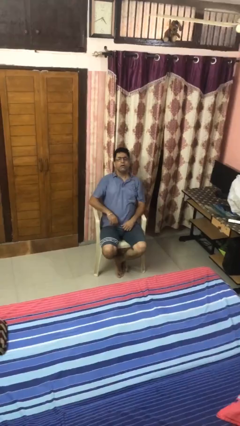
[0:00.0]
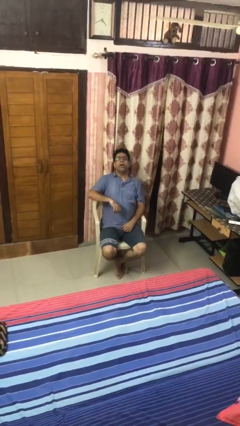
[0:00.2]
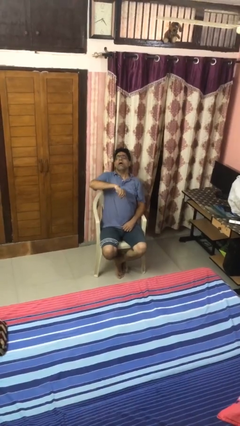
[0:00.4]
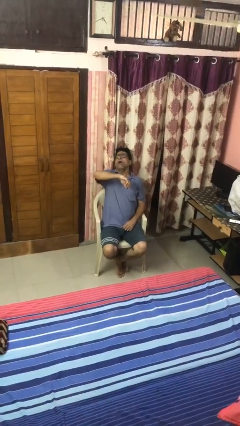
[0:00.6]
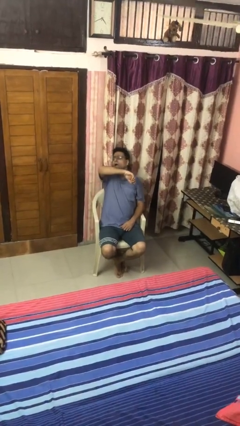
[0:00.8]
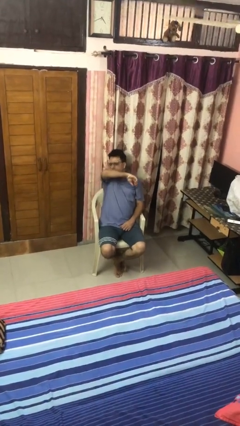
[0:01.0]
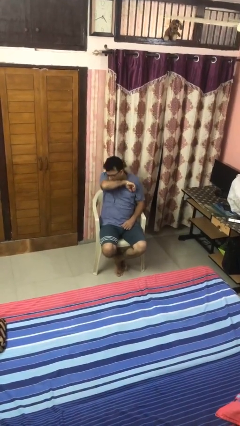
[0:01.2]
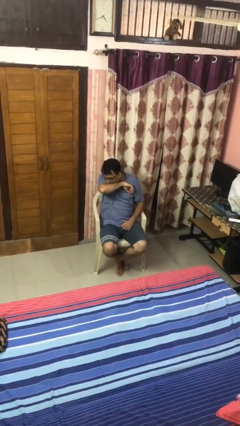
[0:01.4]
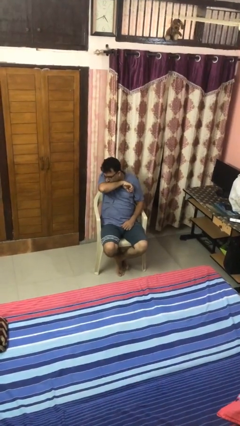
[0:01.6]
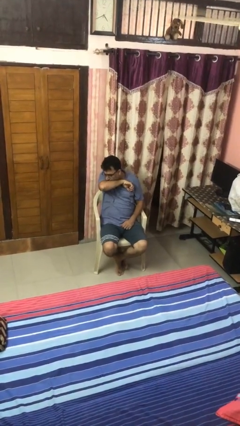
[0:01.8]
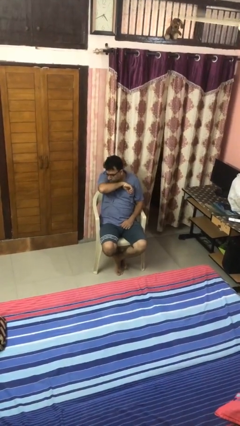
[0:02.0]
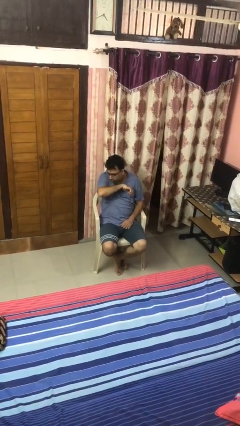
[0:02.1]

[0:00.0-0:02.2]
person sneezes into arm

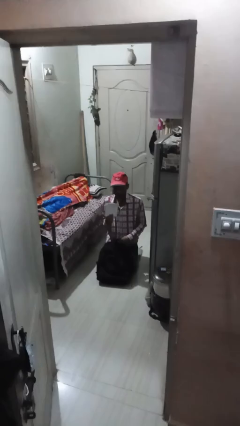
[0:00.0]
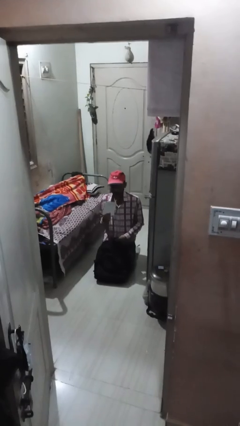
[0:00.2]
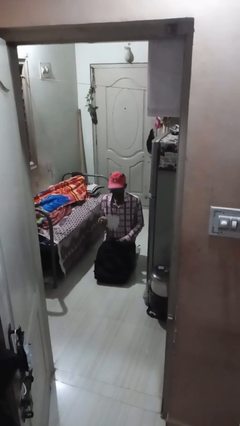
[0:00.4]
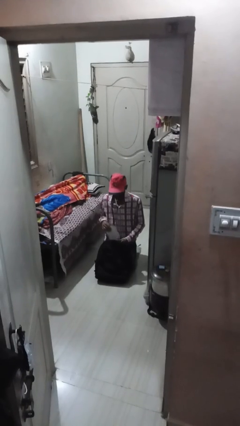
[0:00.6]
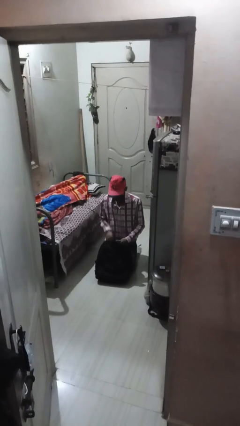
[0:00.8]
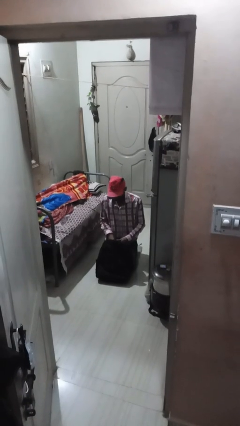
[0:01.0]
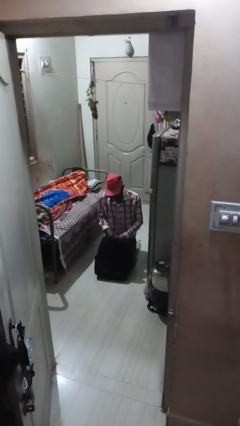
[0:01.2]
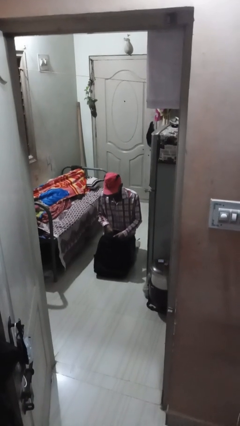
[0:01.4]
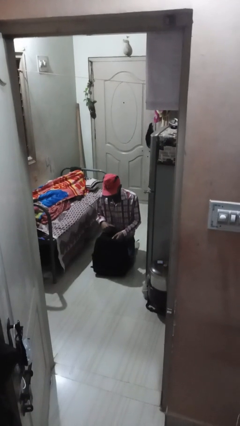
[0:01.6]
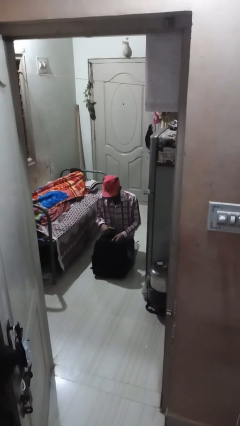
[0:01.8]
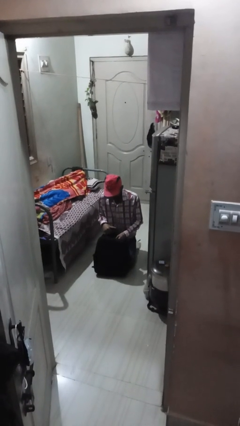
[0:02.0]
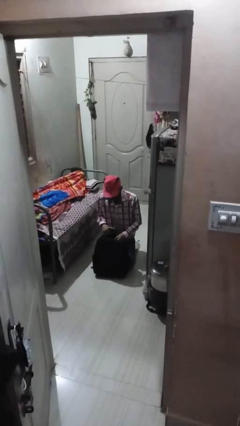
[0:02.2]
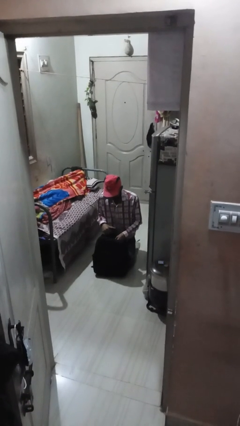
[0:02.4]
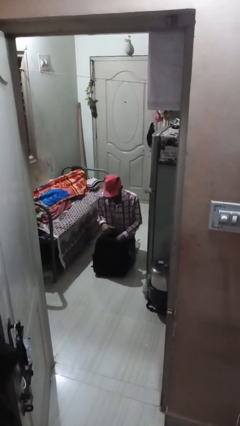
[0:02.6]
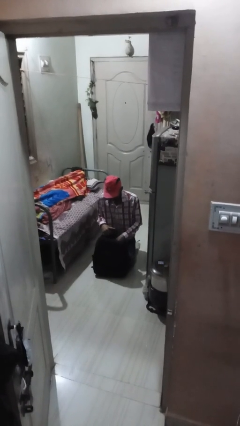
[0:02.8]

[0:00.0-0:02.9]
person puts object into backpack

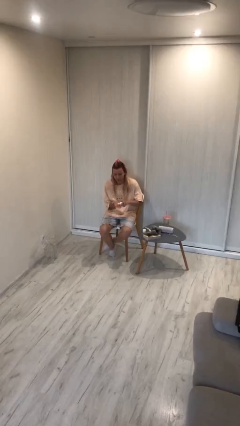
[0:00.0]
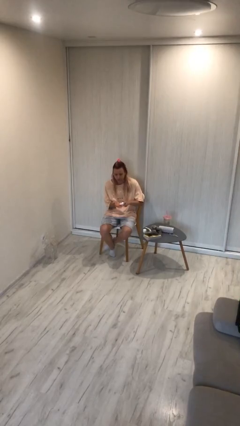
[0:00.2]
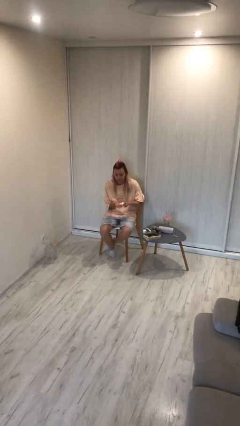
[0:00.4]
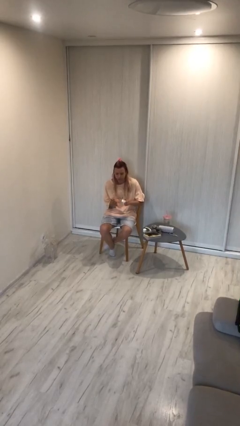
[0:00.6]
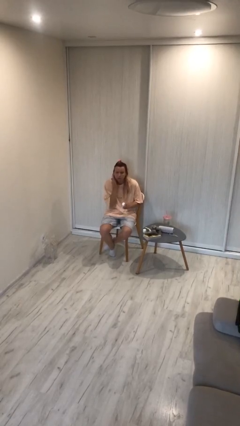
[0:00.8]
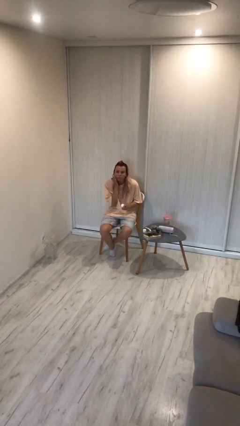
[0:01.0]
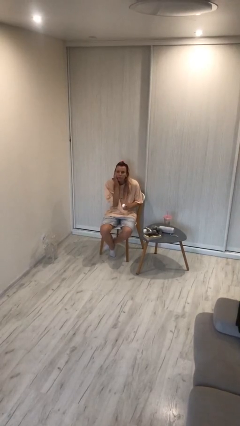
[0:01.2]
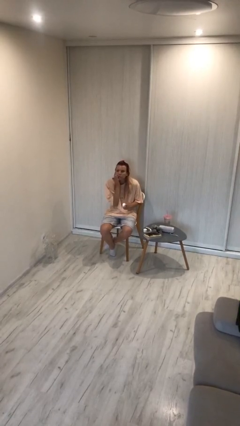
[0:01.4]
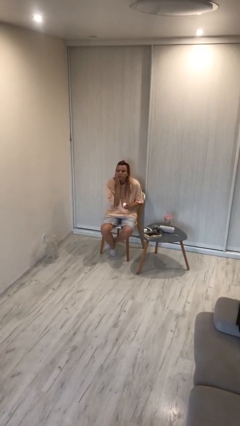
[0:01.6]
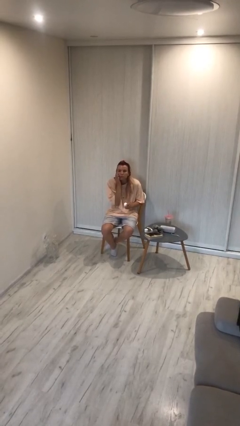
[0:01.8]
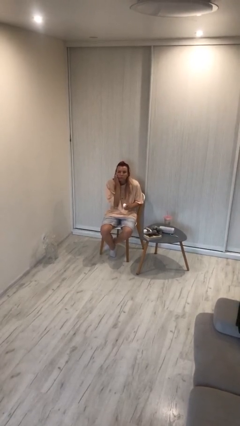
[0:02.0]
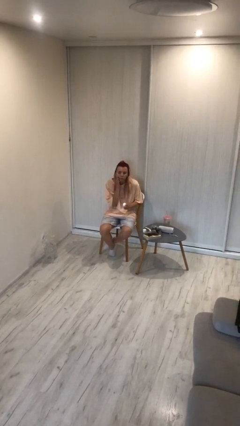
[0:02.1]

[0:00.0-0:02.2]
person applies shaving cream

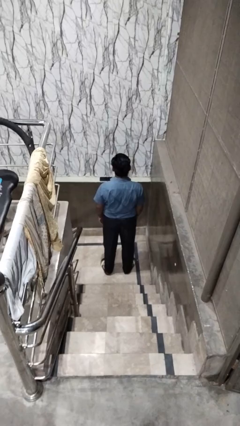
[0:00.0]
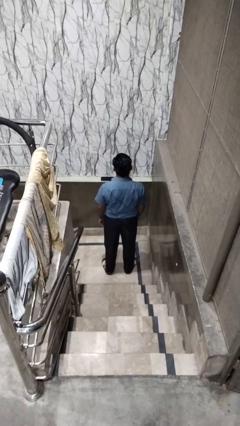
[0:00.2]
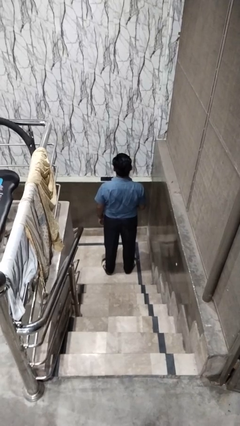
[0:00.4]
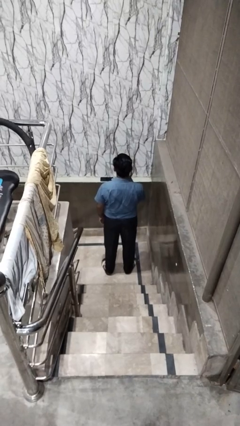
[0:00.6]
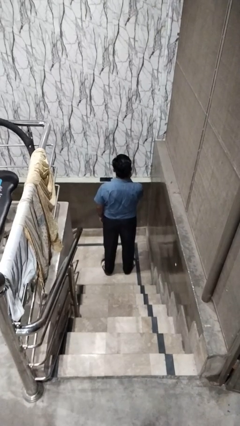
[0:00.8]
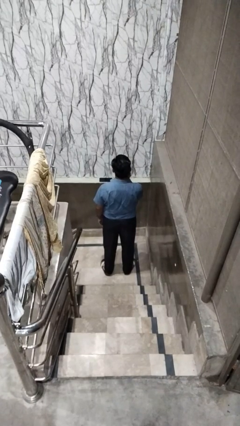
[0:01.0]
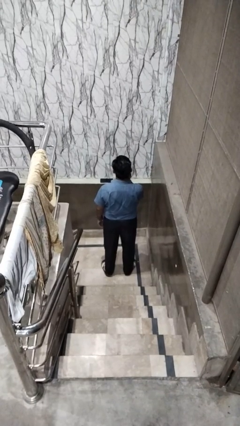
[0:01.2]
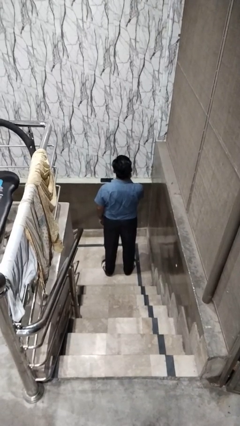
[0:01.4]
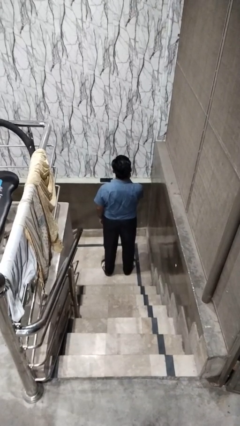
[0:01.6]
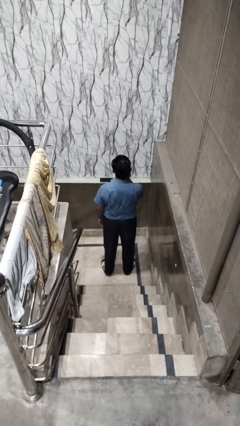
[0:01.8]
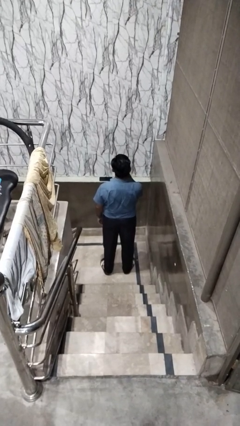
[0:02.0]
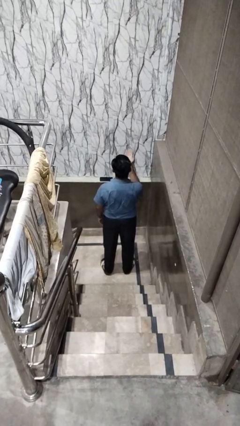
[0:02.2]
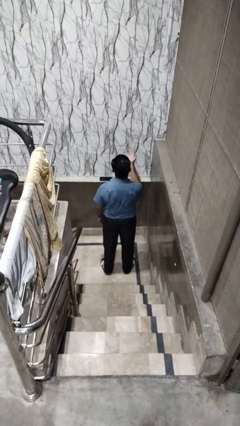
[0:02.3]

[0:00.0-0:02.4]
person gestures blow kiss

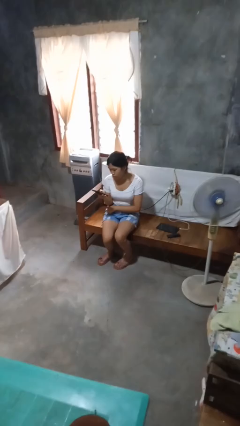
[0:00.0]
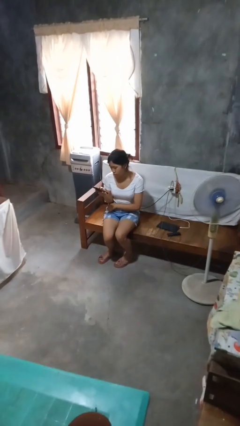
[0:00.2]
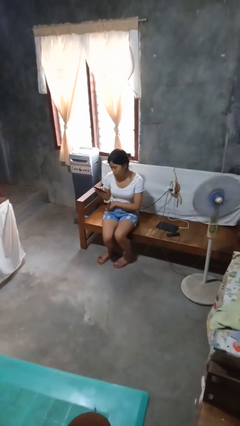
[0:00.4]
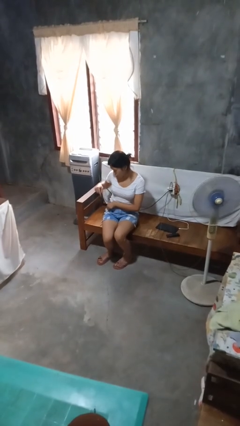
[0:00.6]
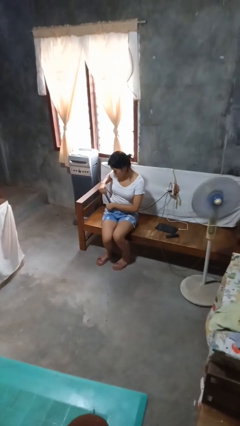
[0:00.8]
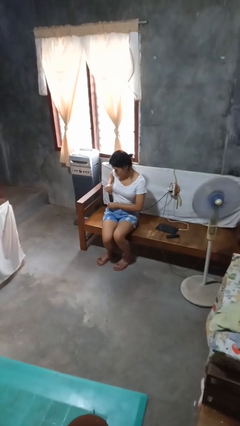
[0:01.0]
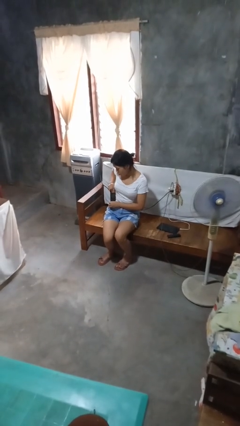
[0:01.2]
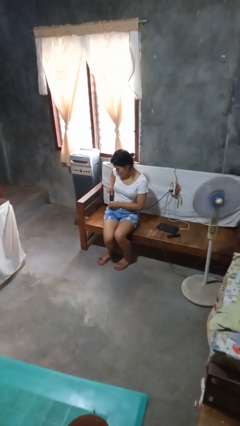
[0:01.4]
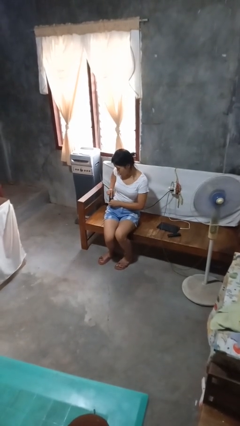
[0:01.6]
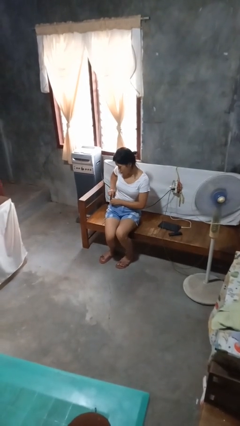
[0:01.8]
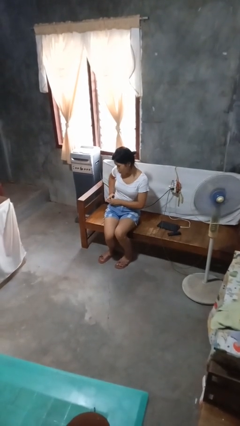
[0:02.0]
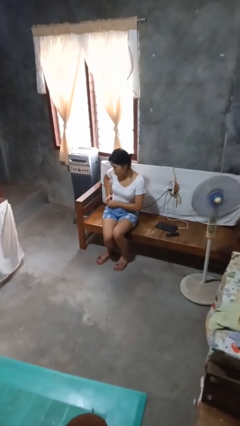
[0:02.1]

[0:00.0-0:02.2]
person puts phone into pocket

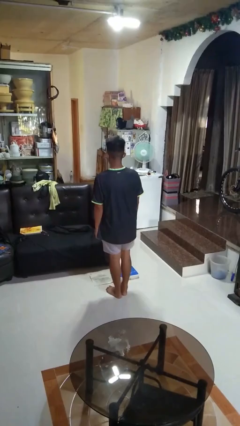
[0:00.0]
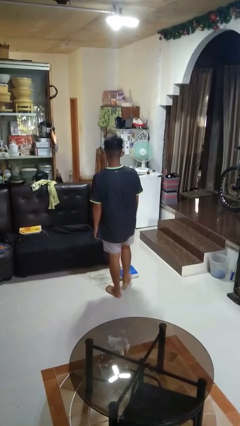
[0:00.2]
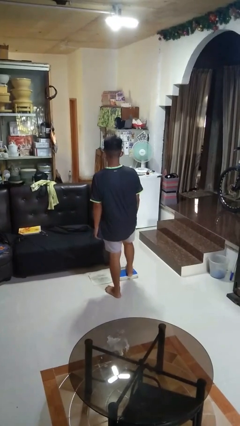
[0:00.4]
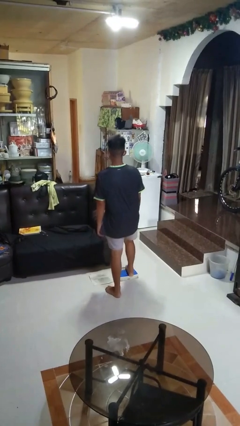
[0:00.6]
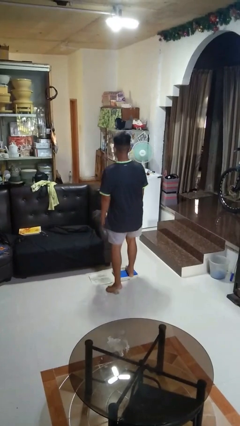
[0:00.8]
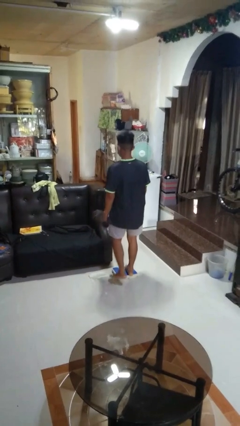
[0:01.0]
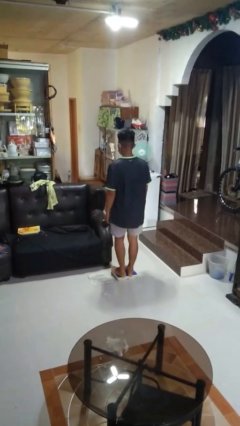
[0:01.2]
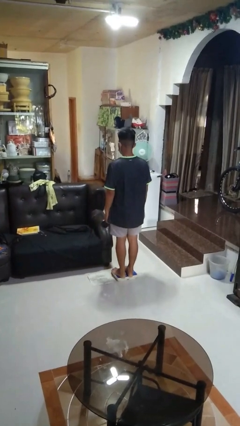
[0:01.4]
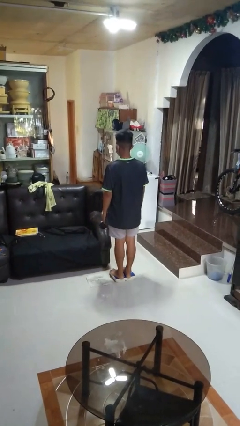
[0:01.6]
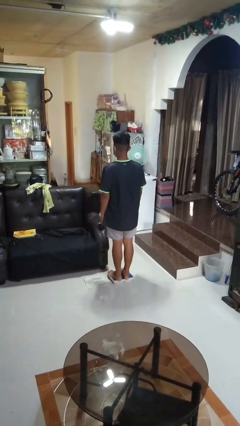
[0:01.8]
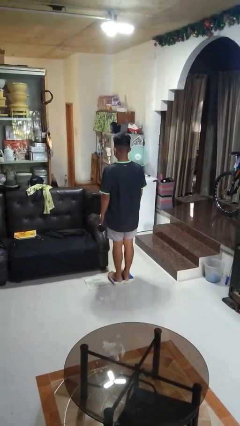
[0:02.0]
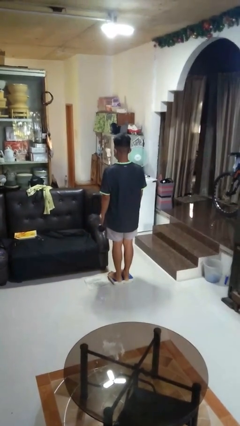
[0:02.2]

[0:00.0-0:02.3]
person uses bodyweight scale

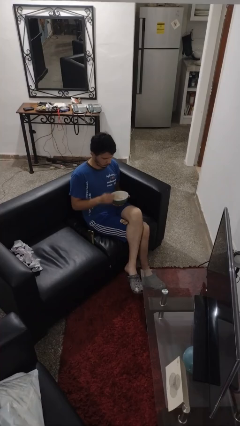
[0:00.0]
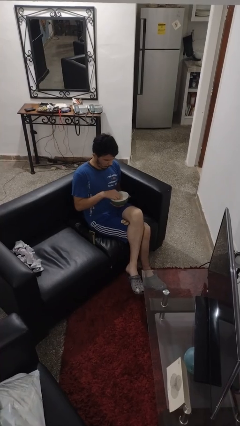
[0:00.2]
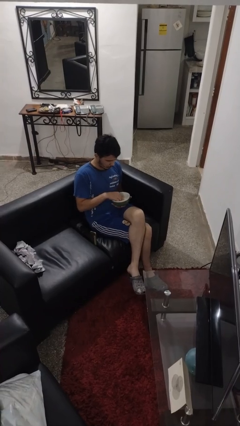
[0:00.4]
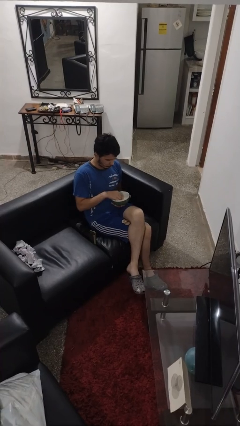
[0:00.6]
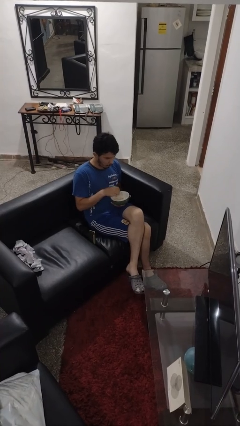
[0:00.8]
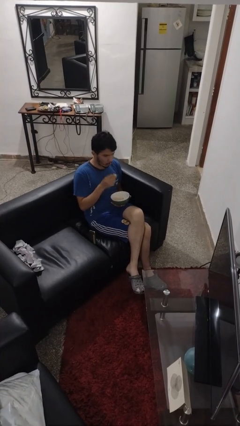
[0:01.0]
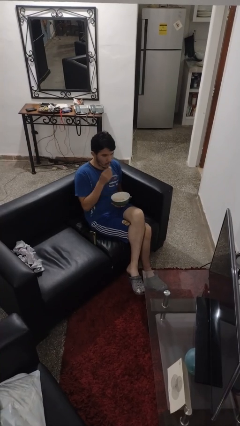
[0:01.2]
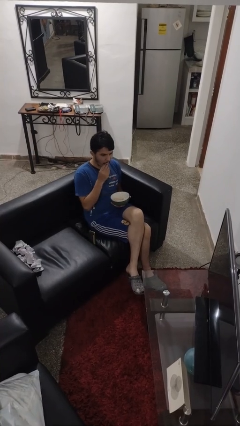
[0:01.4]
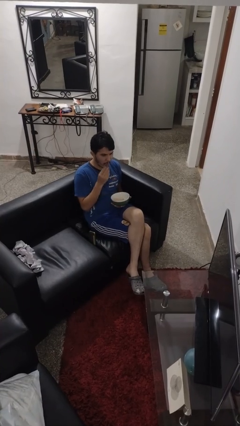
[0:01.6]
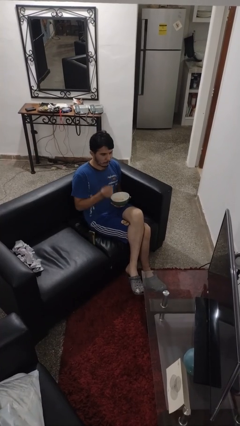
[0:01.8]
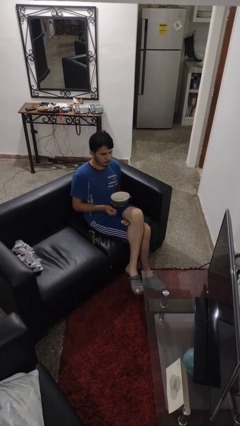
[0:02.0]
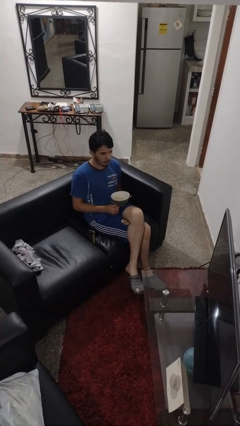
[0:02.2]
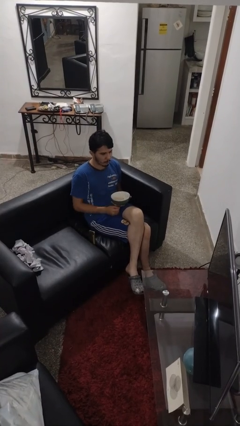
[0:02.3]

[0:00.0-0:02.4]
person eats with hands

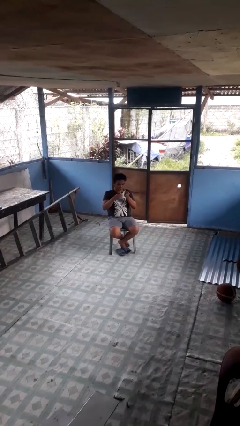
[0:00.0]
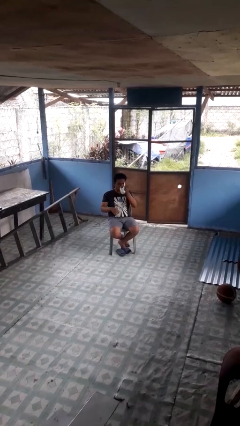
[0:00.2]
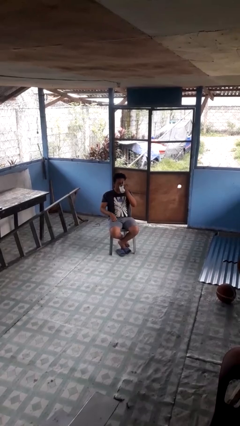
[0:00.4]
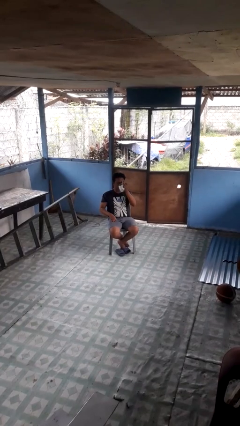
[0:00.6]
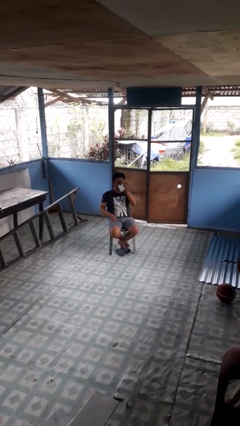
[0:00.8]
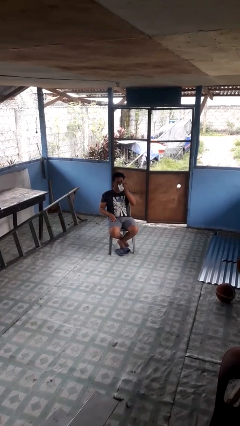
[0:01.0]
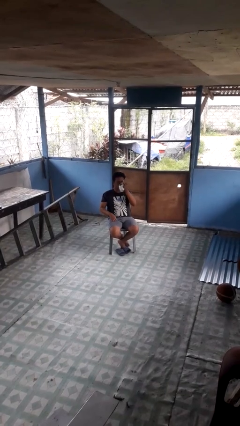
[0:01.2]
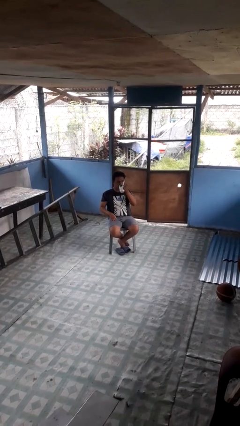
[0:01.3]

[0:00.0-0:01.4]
person drinks from mug
